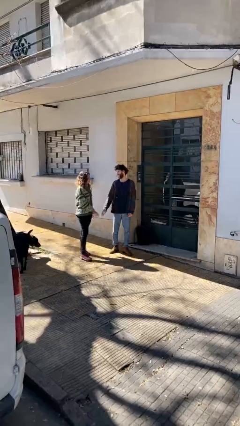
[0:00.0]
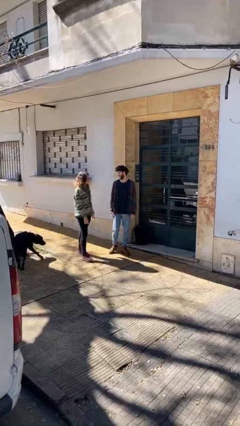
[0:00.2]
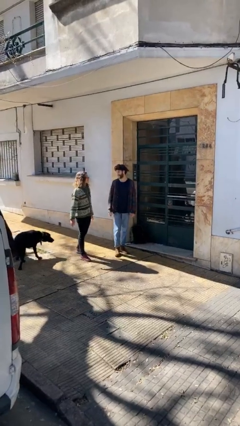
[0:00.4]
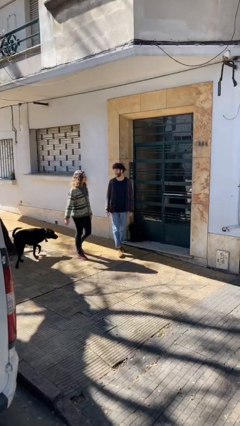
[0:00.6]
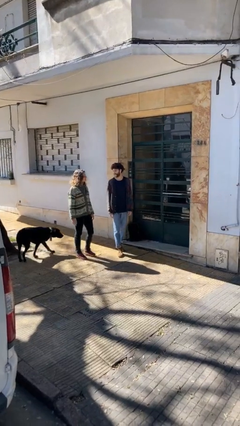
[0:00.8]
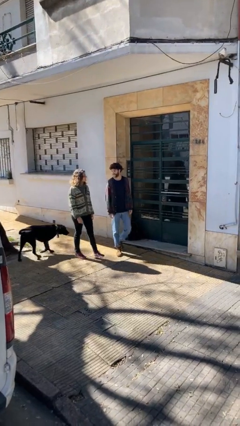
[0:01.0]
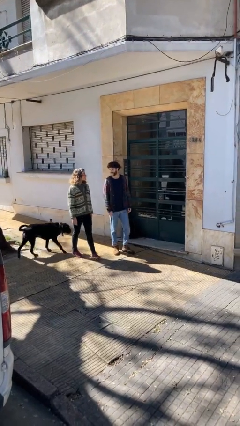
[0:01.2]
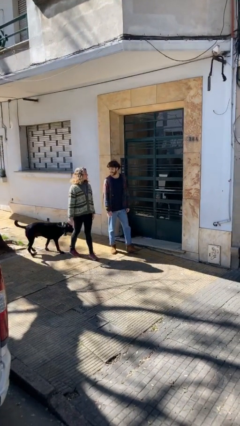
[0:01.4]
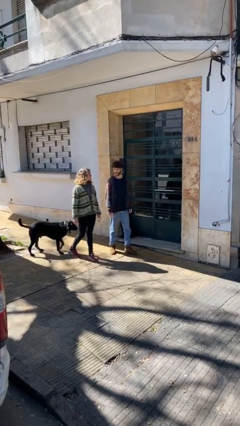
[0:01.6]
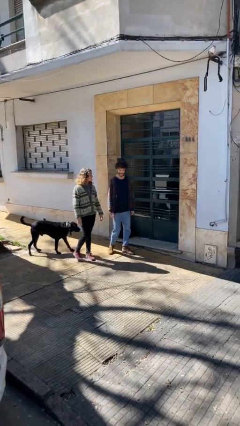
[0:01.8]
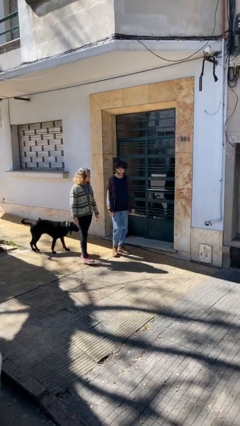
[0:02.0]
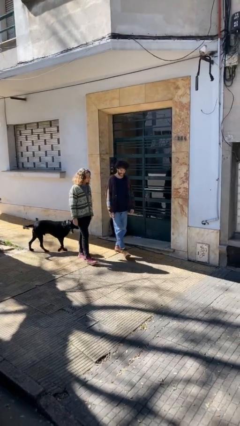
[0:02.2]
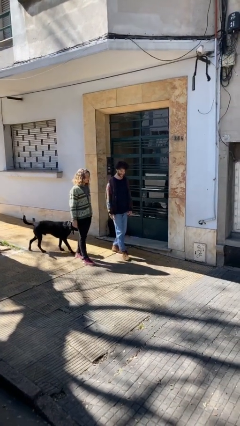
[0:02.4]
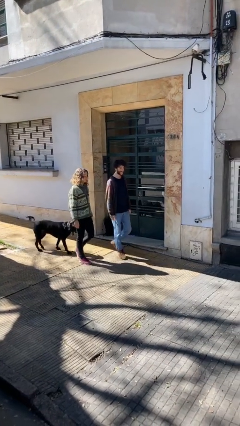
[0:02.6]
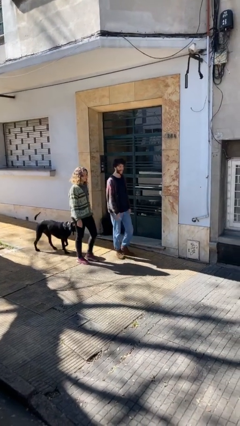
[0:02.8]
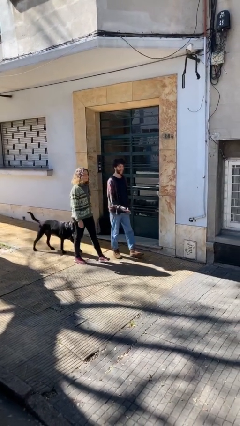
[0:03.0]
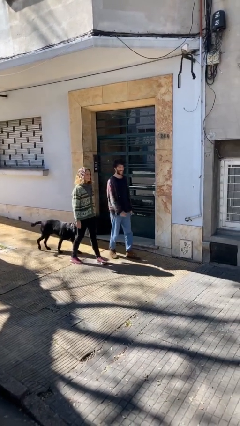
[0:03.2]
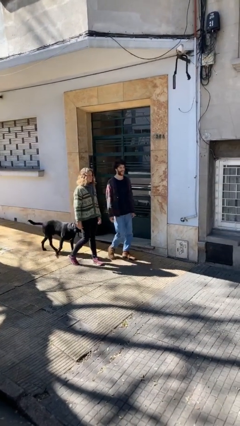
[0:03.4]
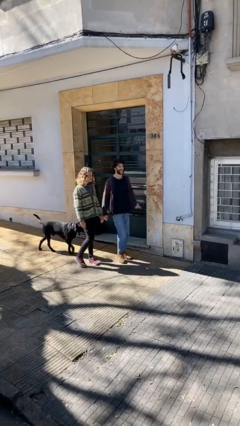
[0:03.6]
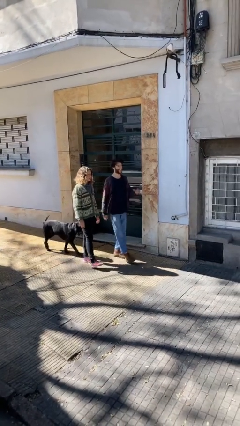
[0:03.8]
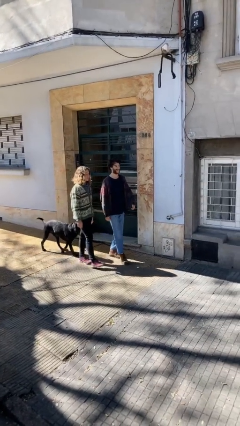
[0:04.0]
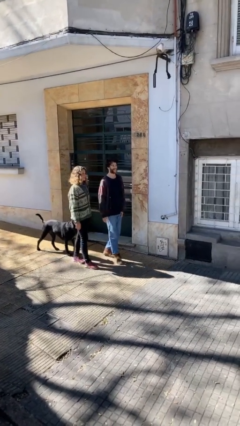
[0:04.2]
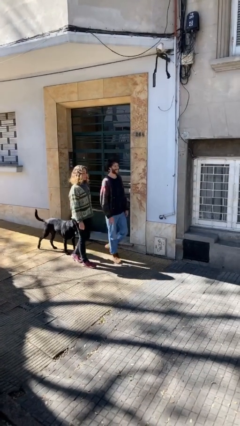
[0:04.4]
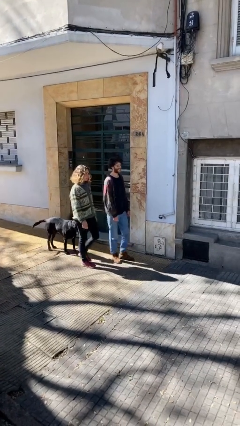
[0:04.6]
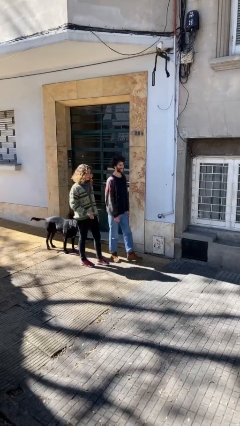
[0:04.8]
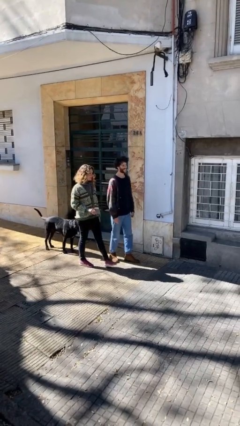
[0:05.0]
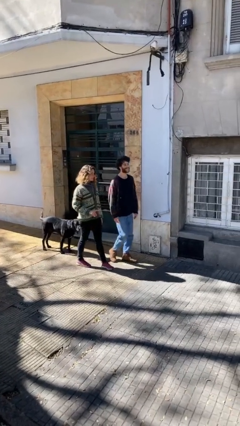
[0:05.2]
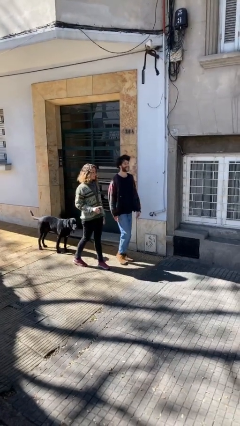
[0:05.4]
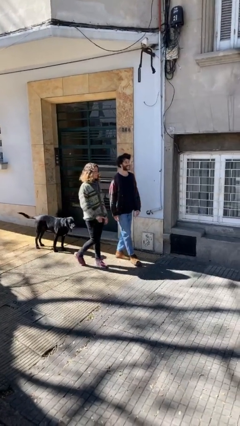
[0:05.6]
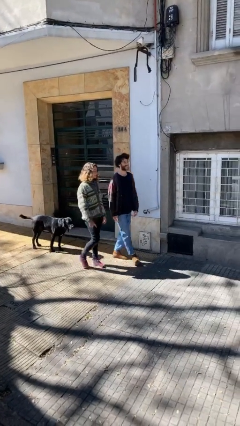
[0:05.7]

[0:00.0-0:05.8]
person talks to person

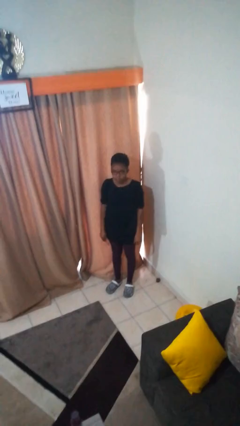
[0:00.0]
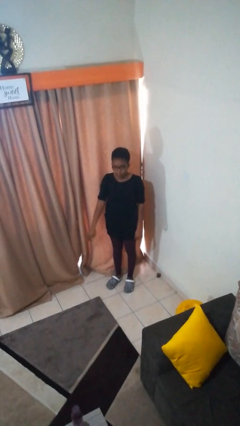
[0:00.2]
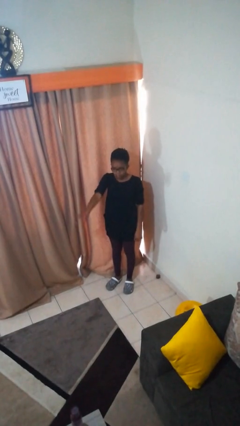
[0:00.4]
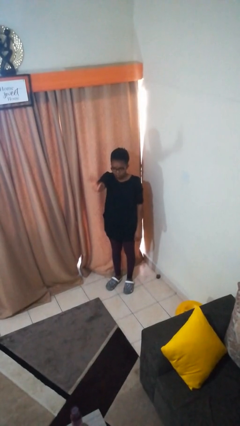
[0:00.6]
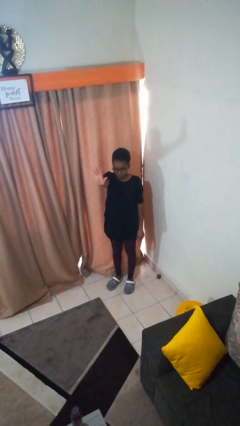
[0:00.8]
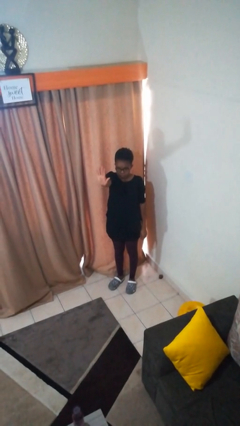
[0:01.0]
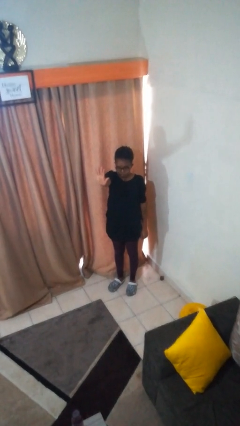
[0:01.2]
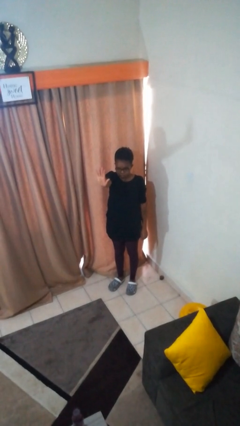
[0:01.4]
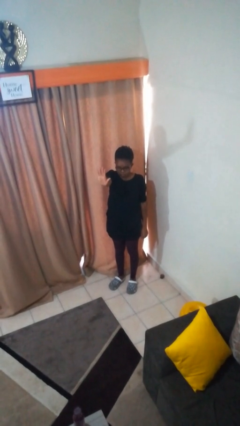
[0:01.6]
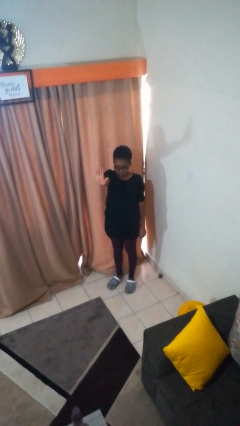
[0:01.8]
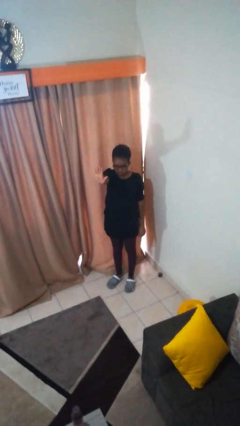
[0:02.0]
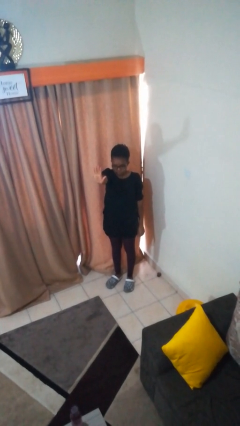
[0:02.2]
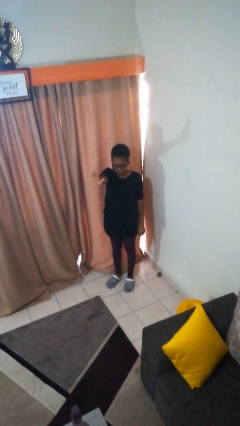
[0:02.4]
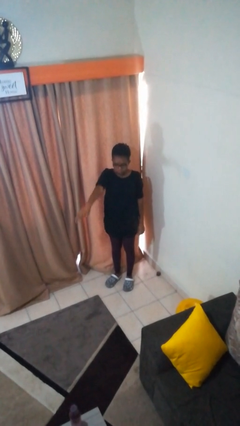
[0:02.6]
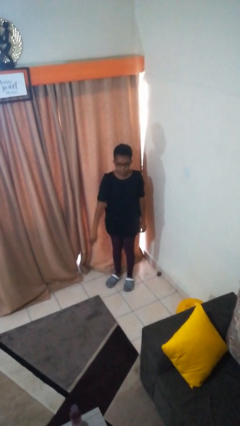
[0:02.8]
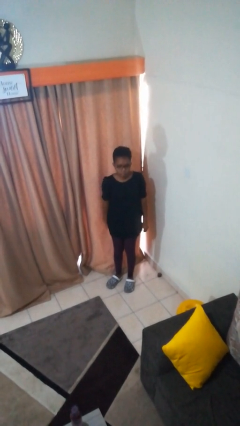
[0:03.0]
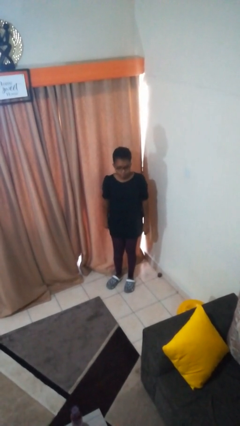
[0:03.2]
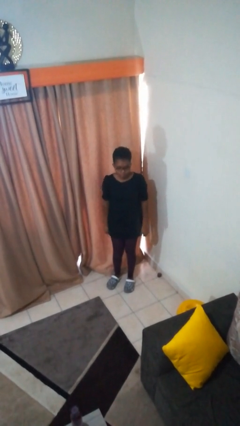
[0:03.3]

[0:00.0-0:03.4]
person gestures stop

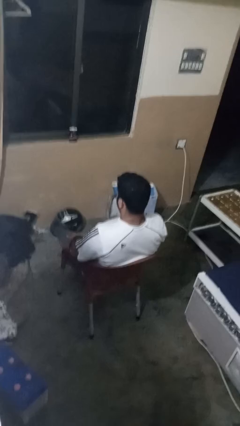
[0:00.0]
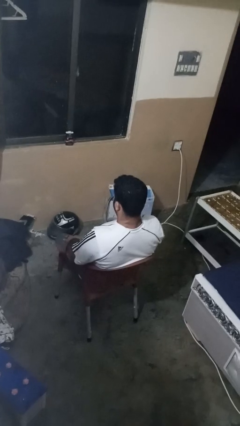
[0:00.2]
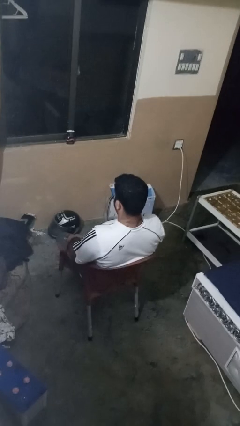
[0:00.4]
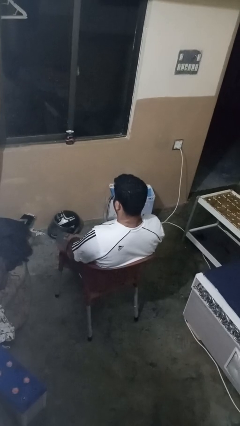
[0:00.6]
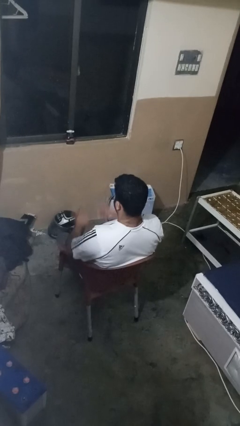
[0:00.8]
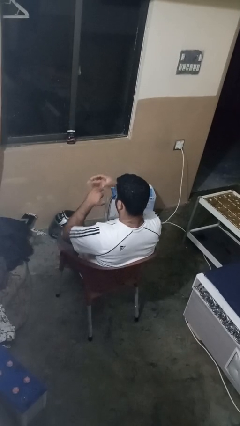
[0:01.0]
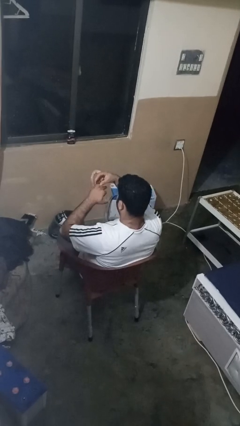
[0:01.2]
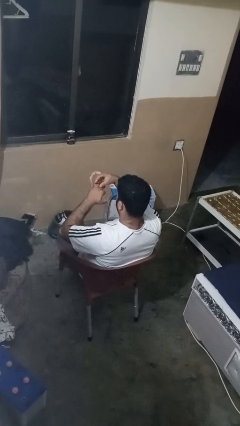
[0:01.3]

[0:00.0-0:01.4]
person takes off ring

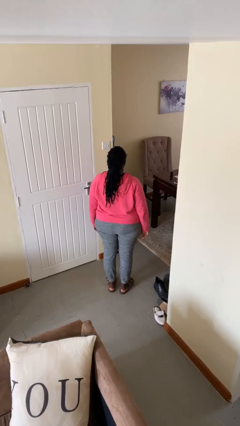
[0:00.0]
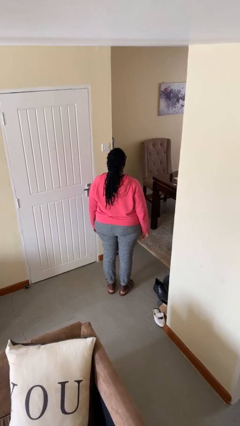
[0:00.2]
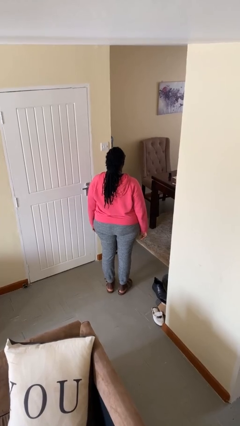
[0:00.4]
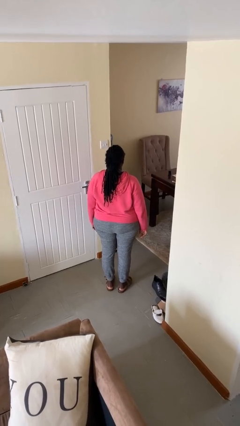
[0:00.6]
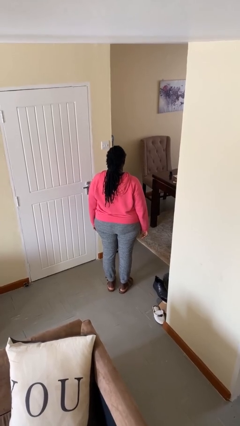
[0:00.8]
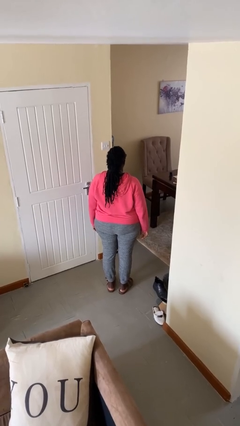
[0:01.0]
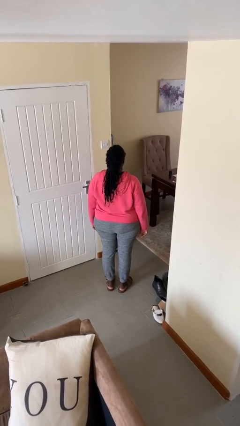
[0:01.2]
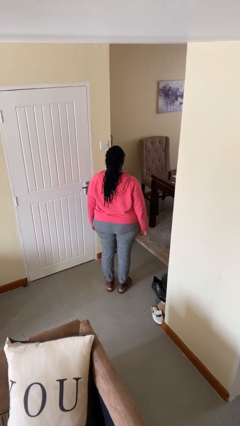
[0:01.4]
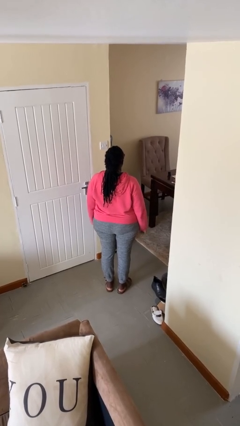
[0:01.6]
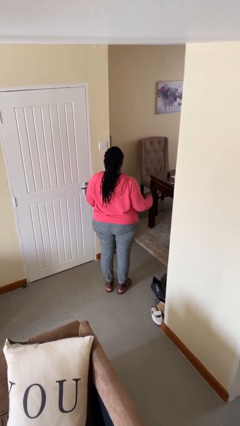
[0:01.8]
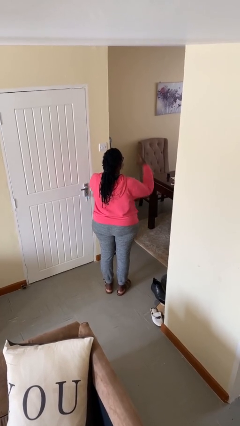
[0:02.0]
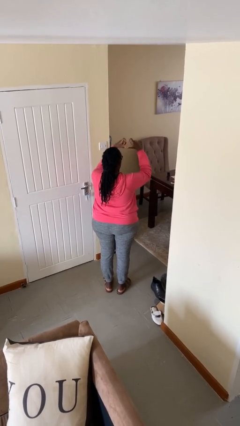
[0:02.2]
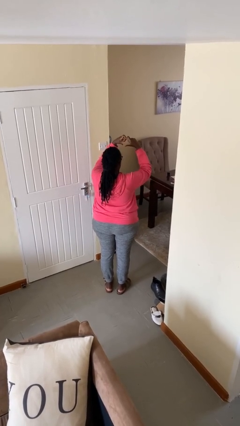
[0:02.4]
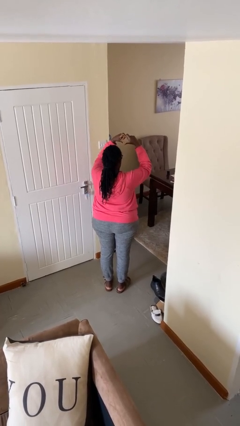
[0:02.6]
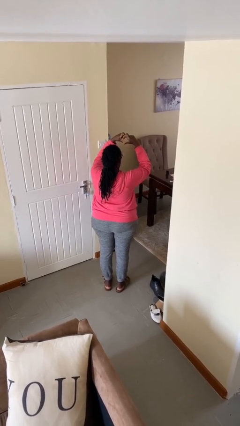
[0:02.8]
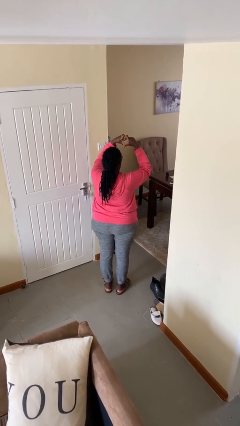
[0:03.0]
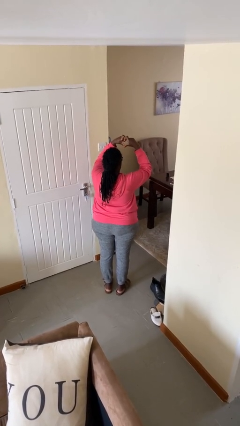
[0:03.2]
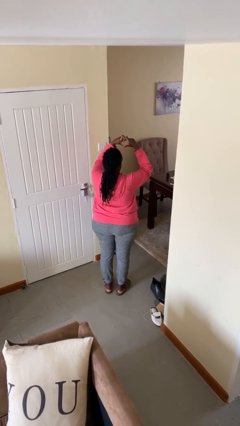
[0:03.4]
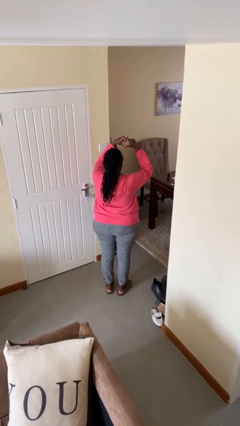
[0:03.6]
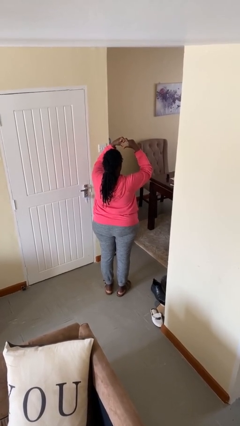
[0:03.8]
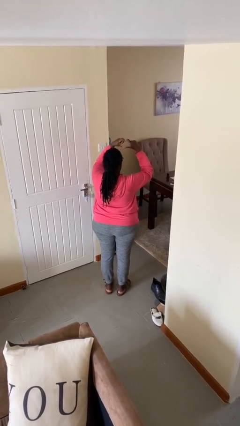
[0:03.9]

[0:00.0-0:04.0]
person gestures heart

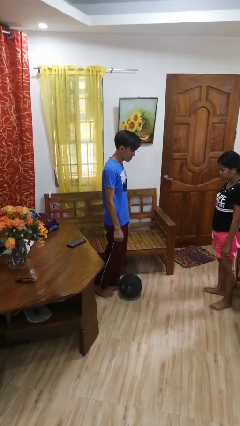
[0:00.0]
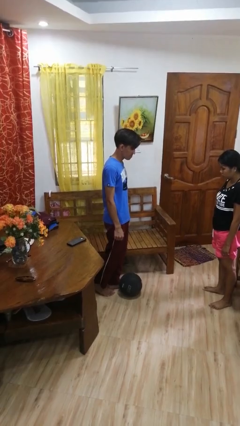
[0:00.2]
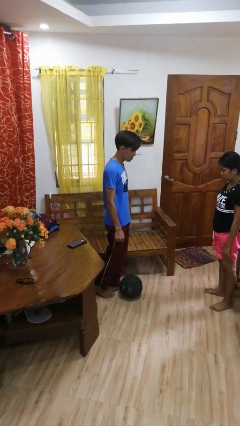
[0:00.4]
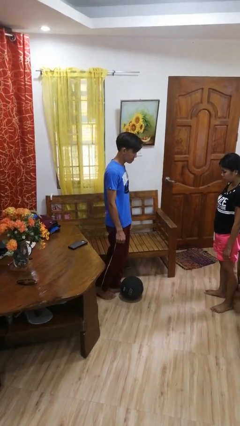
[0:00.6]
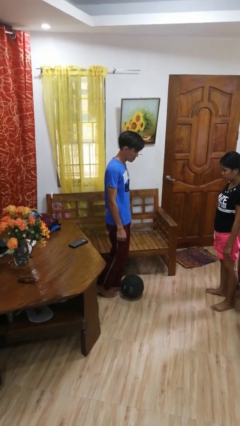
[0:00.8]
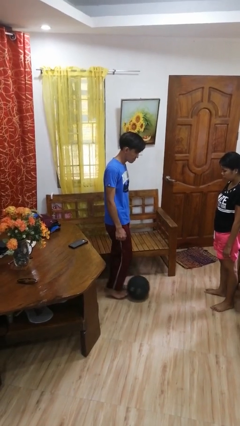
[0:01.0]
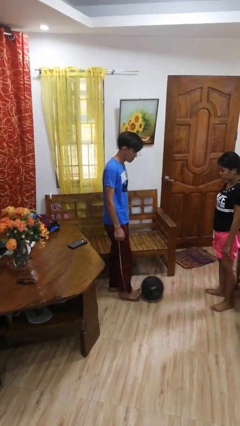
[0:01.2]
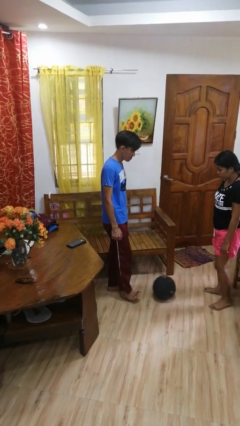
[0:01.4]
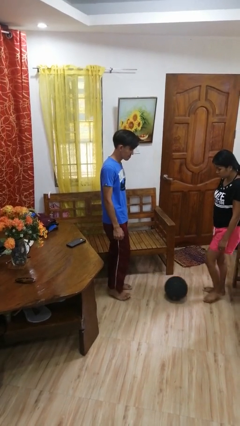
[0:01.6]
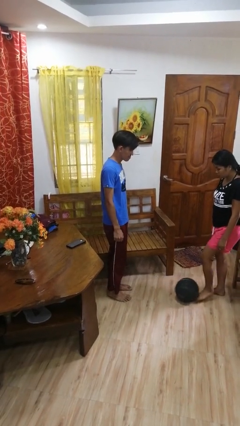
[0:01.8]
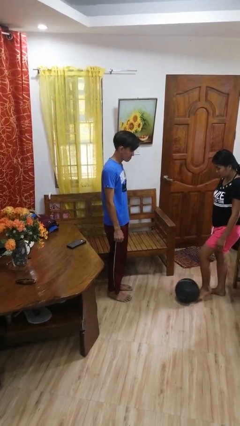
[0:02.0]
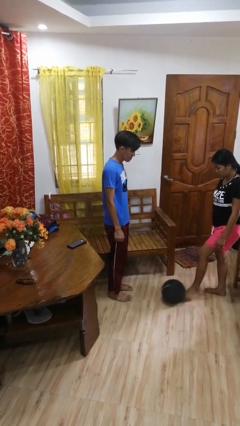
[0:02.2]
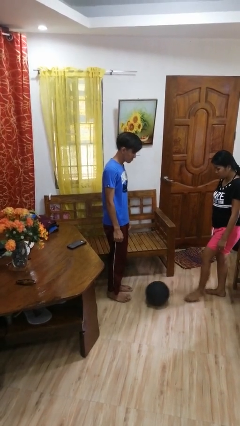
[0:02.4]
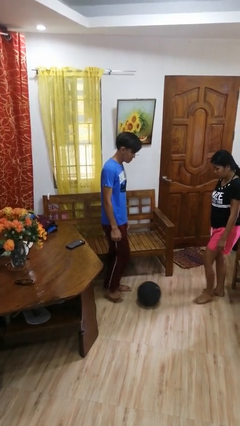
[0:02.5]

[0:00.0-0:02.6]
person kicks object to person

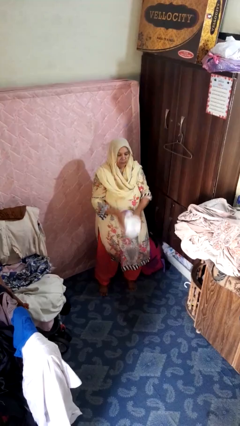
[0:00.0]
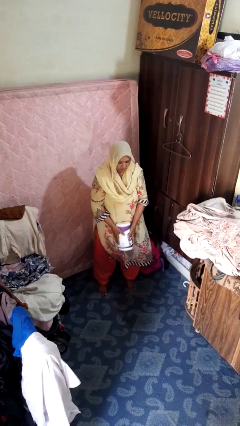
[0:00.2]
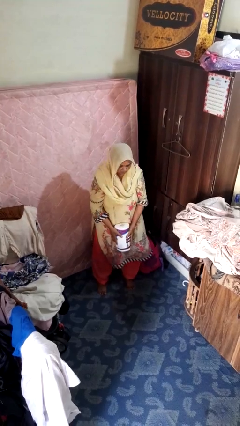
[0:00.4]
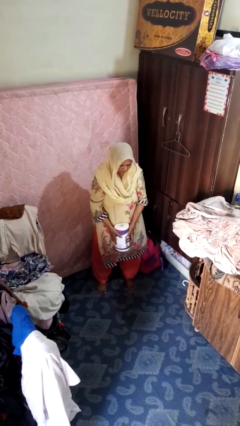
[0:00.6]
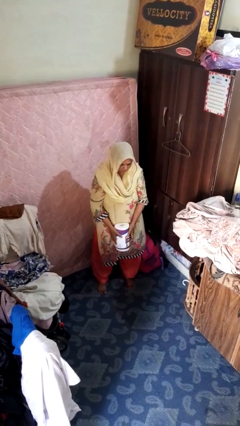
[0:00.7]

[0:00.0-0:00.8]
person catches dropped object
